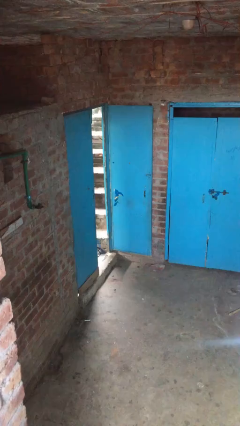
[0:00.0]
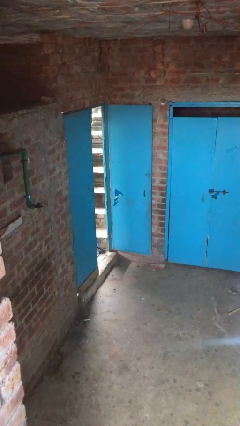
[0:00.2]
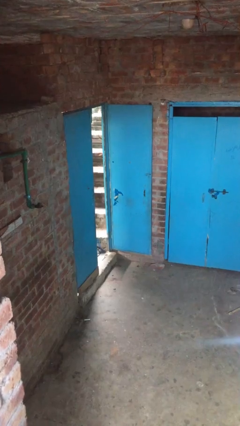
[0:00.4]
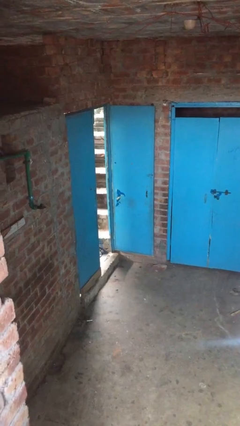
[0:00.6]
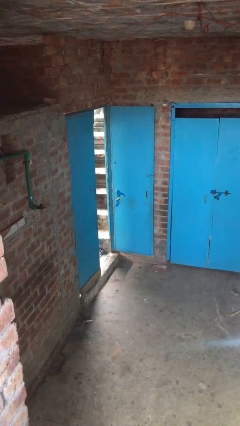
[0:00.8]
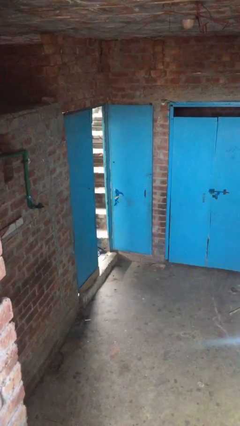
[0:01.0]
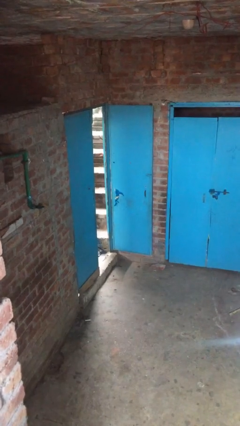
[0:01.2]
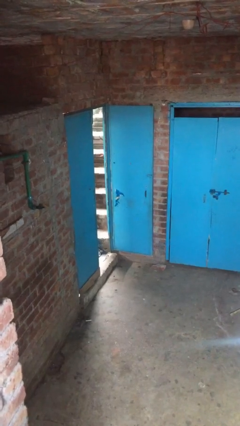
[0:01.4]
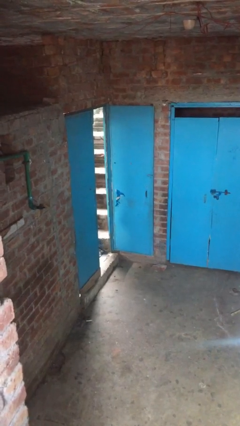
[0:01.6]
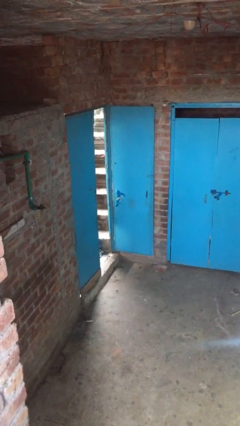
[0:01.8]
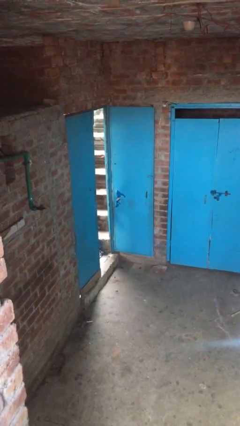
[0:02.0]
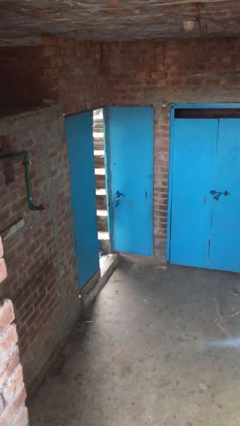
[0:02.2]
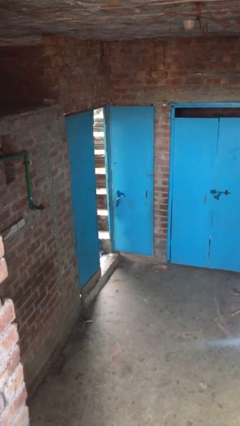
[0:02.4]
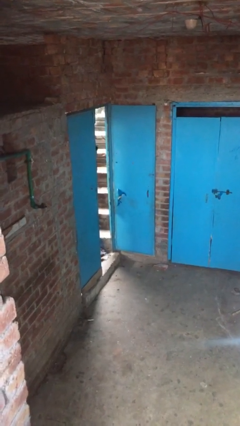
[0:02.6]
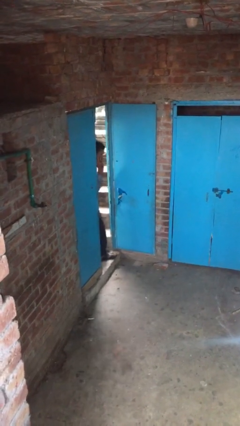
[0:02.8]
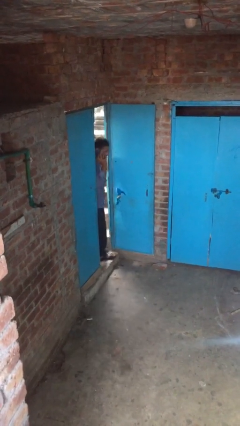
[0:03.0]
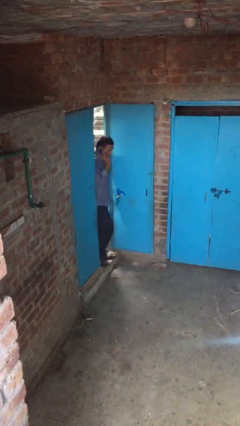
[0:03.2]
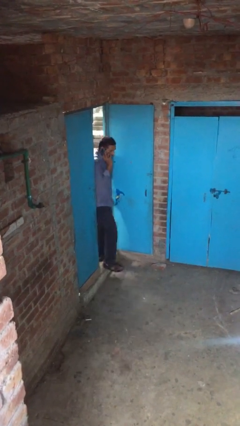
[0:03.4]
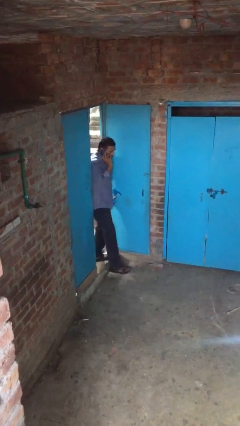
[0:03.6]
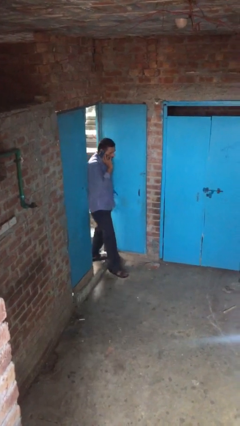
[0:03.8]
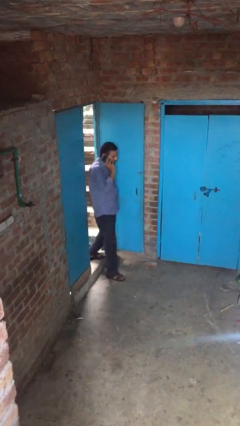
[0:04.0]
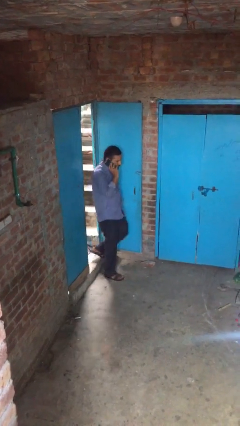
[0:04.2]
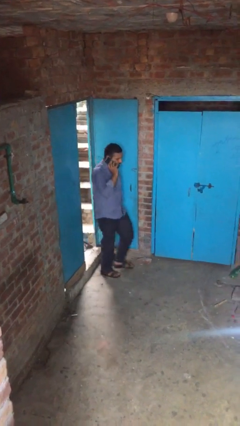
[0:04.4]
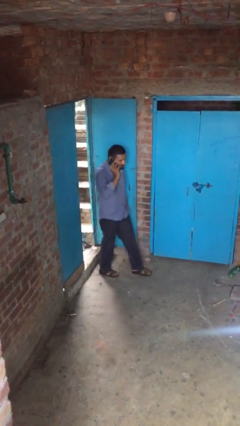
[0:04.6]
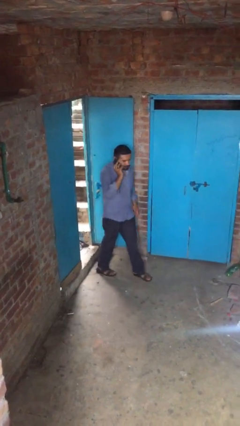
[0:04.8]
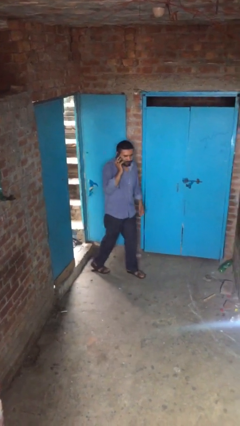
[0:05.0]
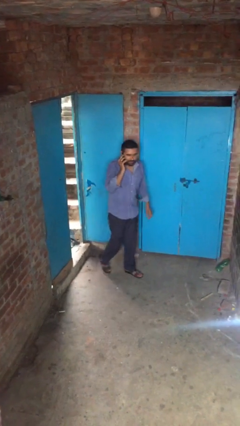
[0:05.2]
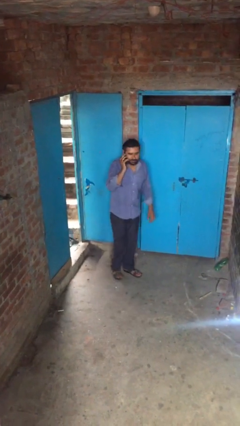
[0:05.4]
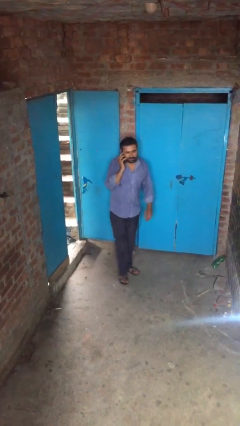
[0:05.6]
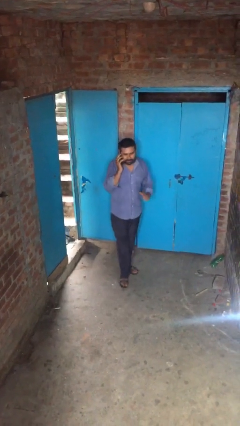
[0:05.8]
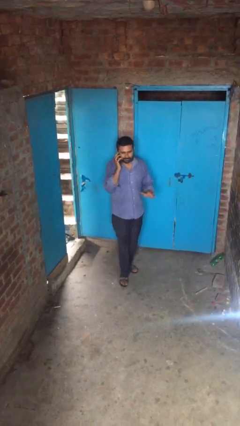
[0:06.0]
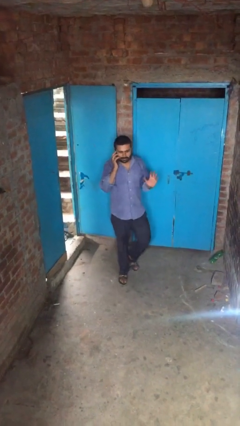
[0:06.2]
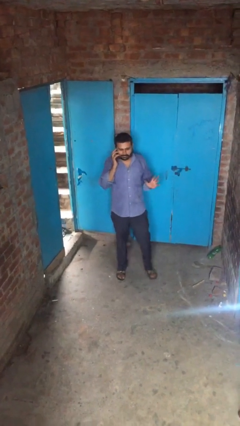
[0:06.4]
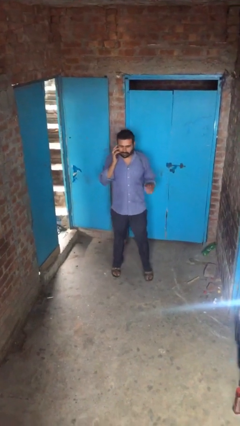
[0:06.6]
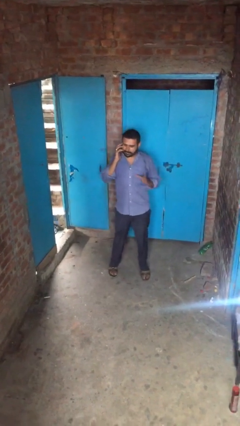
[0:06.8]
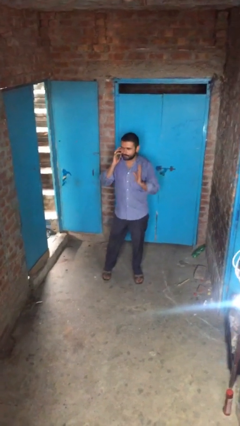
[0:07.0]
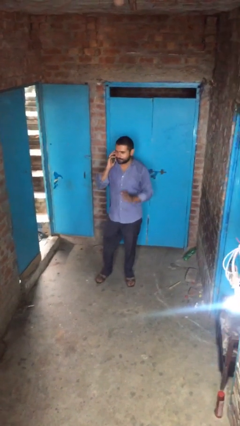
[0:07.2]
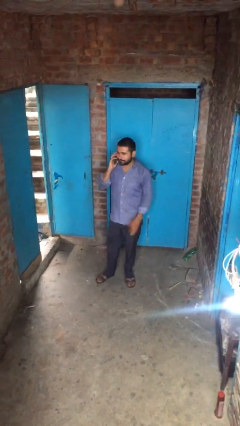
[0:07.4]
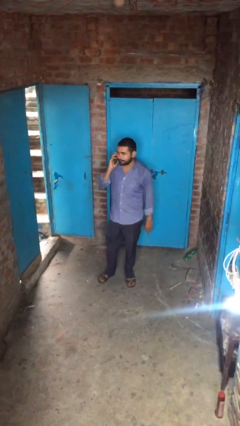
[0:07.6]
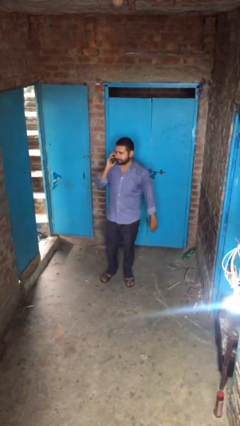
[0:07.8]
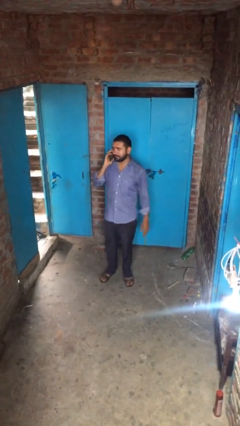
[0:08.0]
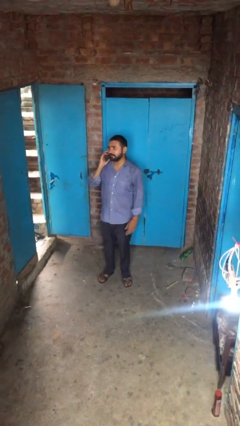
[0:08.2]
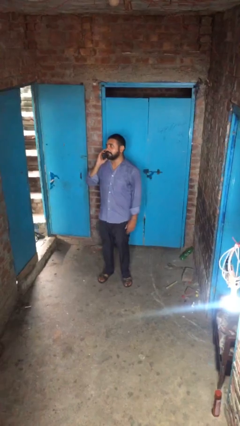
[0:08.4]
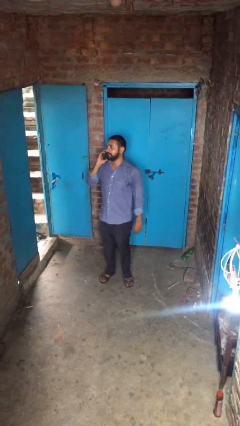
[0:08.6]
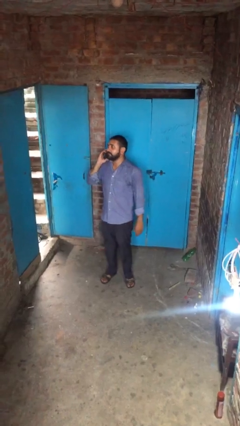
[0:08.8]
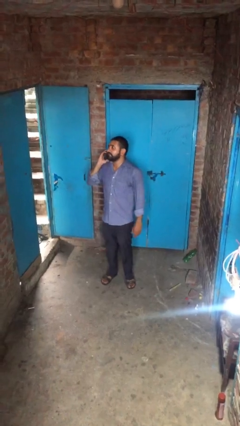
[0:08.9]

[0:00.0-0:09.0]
person enters scene through structure

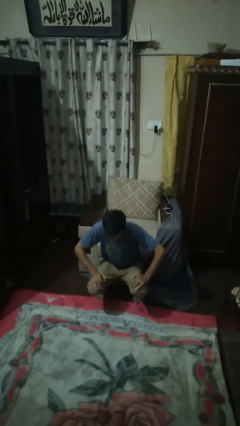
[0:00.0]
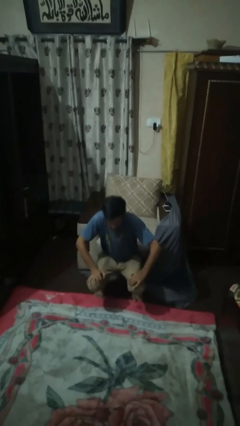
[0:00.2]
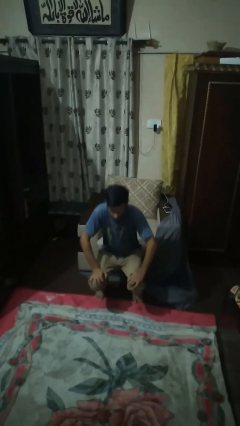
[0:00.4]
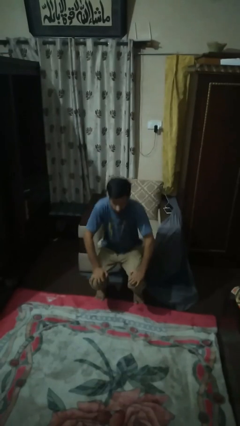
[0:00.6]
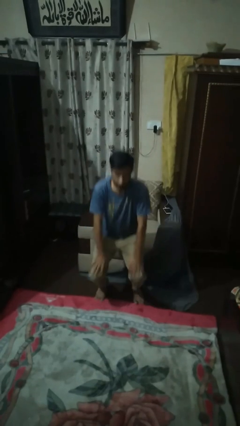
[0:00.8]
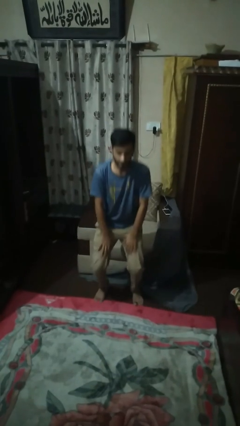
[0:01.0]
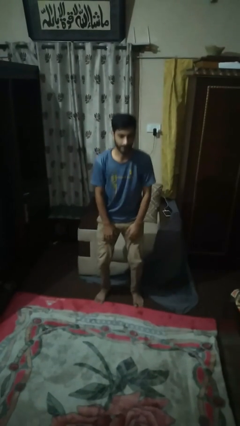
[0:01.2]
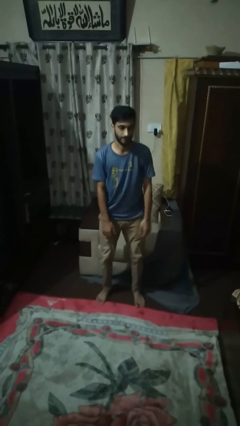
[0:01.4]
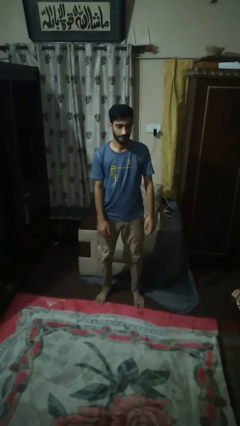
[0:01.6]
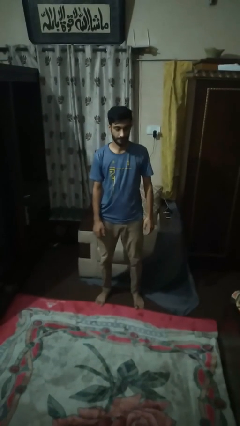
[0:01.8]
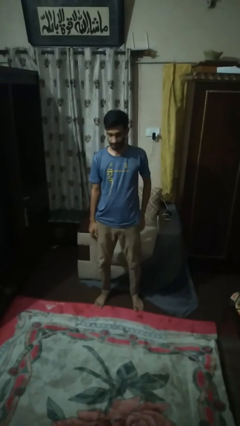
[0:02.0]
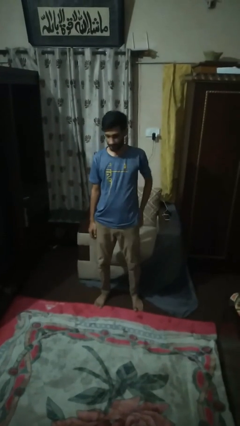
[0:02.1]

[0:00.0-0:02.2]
person stands up

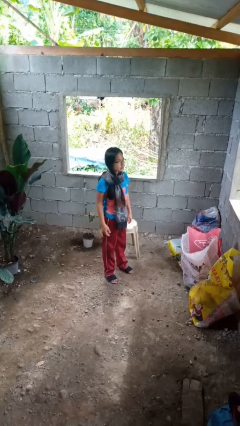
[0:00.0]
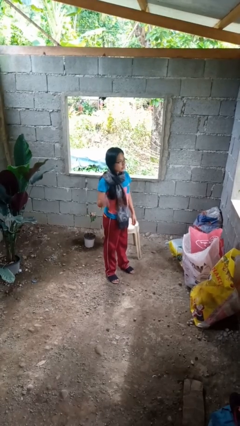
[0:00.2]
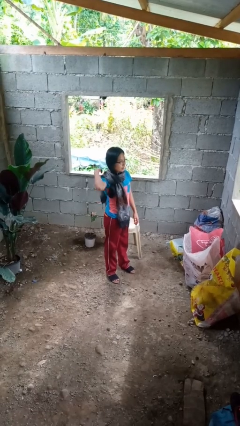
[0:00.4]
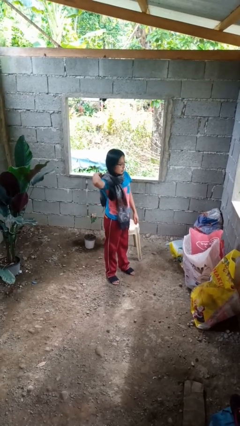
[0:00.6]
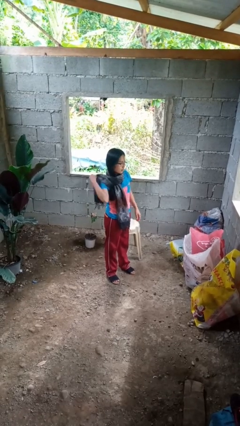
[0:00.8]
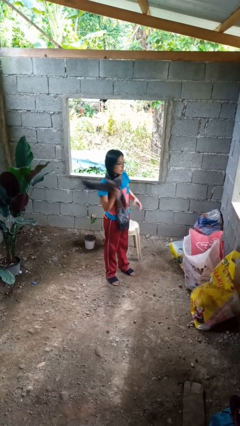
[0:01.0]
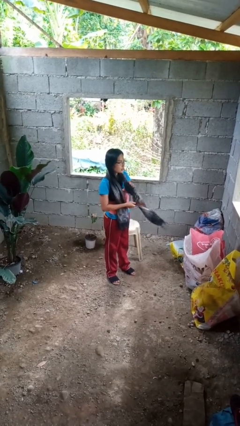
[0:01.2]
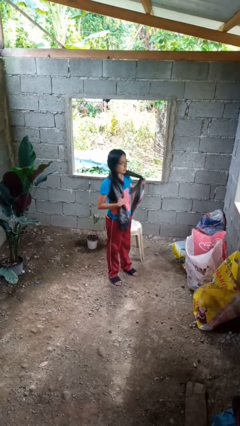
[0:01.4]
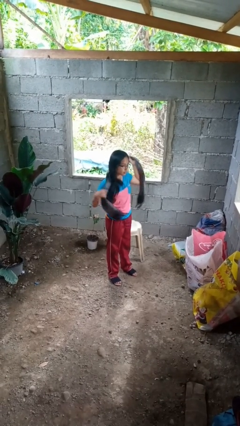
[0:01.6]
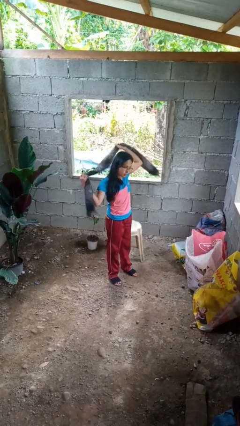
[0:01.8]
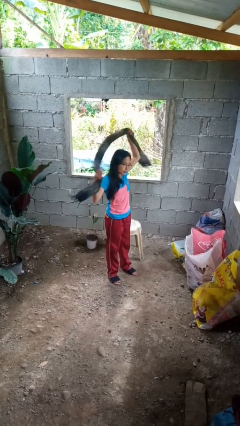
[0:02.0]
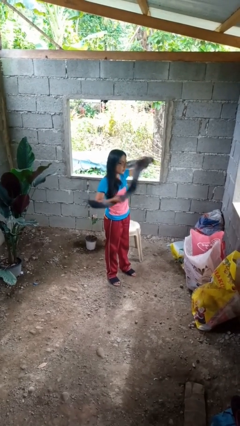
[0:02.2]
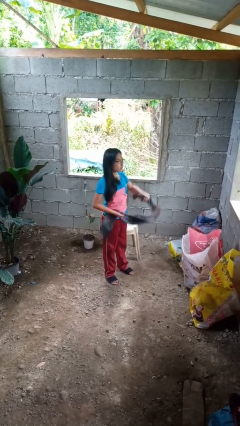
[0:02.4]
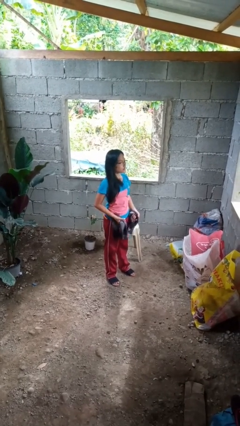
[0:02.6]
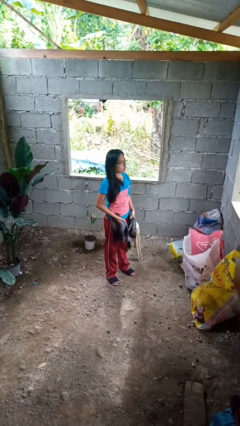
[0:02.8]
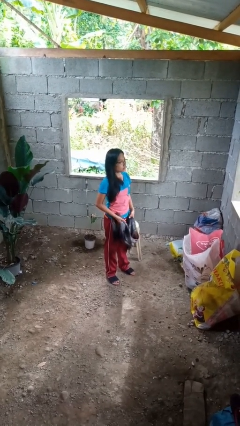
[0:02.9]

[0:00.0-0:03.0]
person takes off scarf

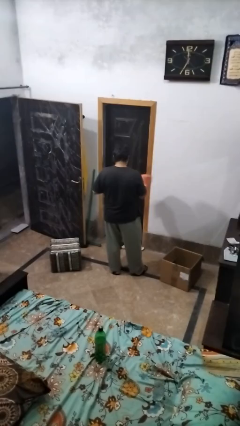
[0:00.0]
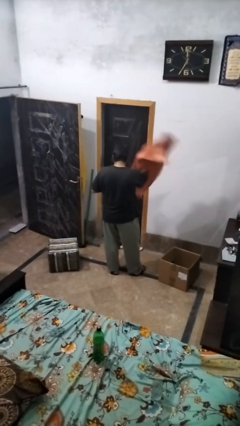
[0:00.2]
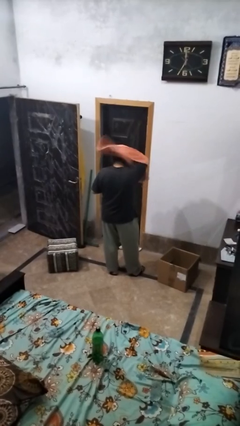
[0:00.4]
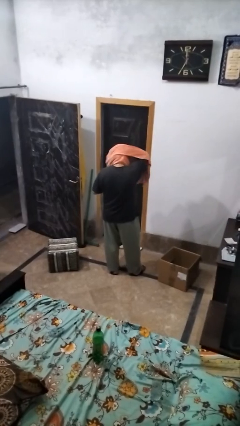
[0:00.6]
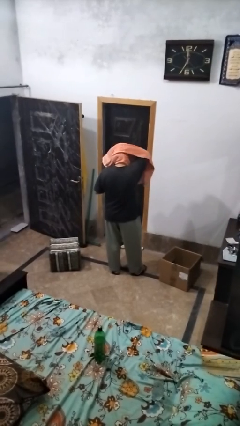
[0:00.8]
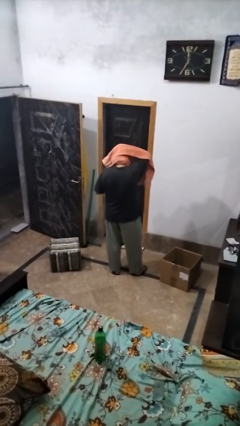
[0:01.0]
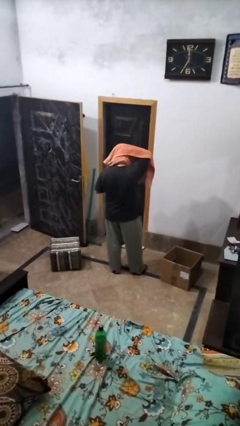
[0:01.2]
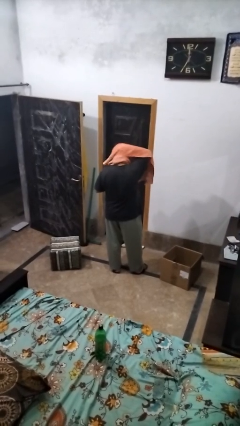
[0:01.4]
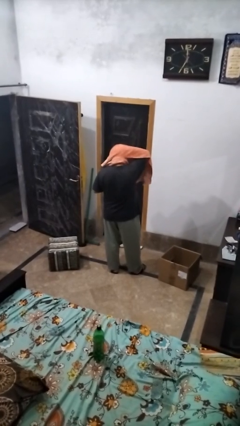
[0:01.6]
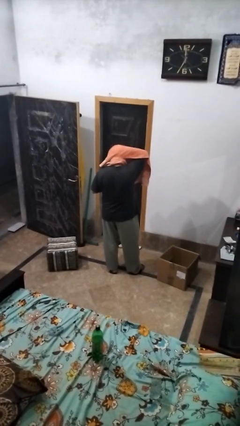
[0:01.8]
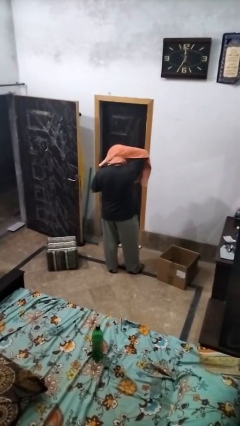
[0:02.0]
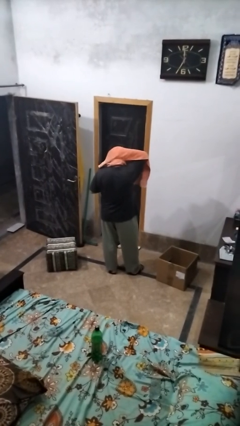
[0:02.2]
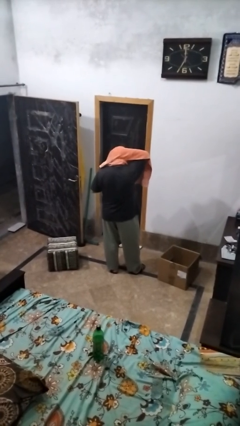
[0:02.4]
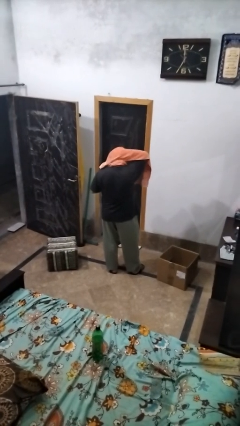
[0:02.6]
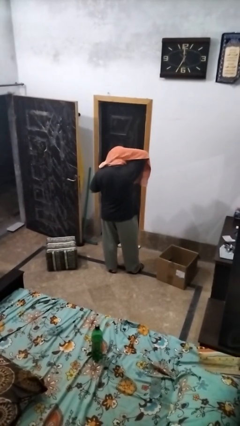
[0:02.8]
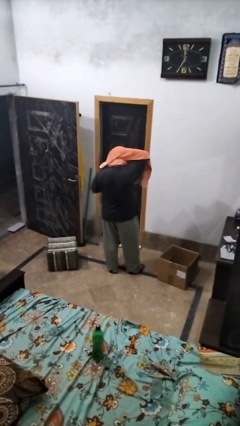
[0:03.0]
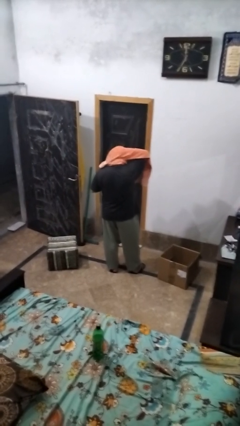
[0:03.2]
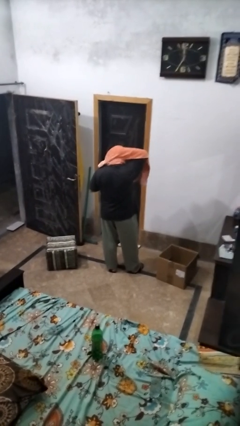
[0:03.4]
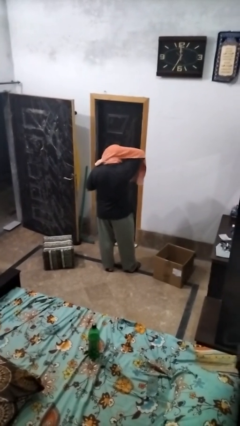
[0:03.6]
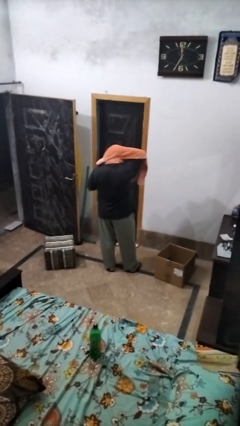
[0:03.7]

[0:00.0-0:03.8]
person dries hair with towel
